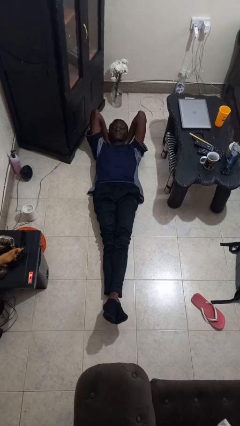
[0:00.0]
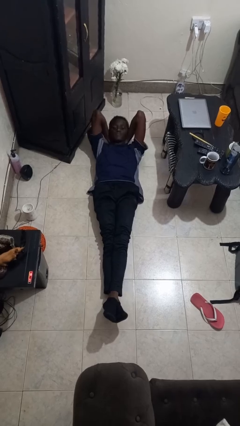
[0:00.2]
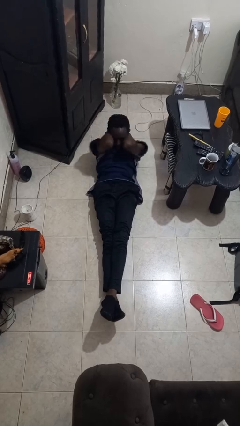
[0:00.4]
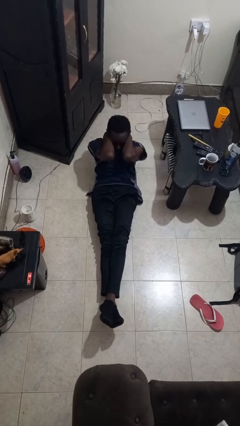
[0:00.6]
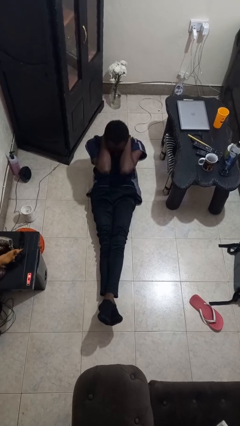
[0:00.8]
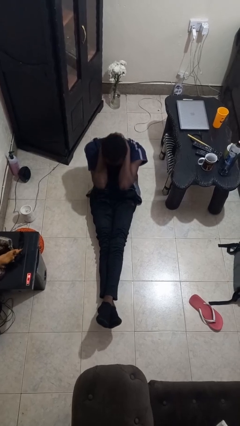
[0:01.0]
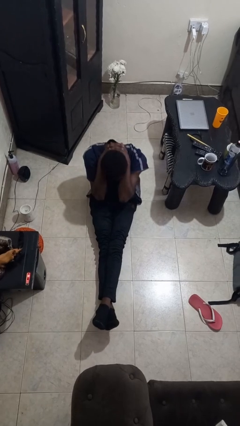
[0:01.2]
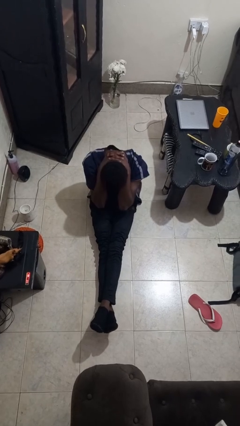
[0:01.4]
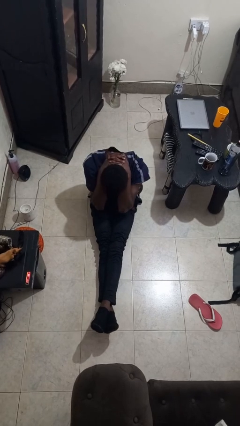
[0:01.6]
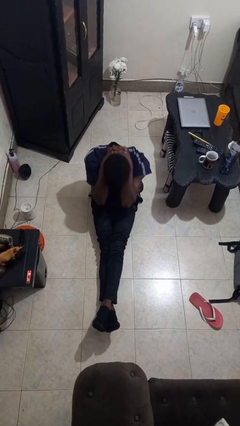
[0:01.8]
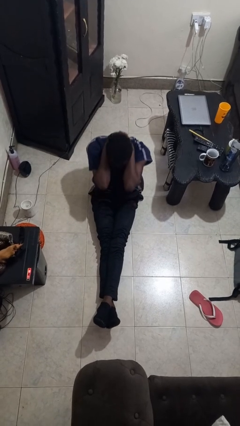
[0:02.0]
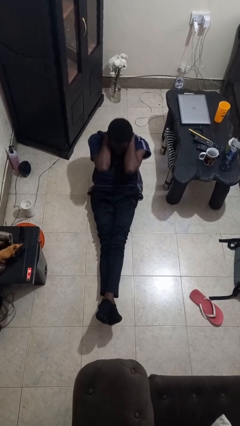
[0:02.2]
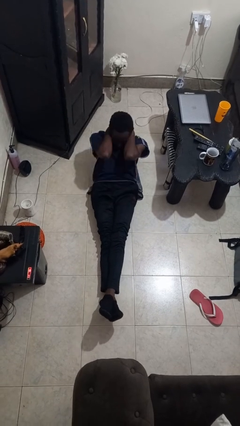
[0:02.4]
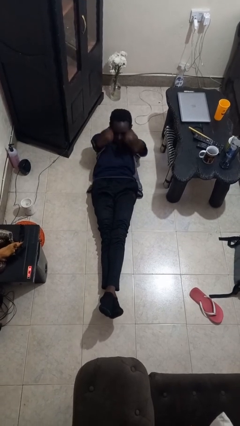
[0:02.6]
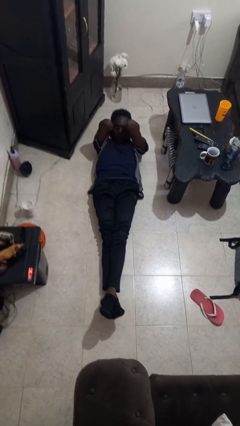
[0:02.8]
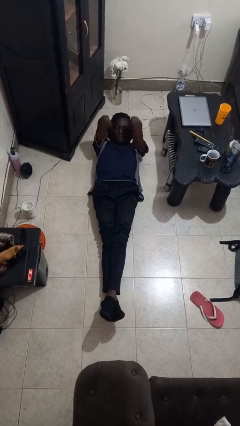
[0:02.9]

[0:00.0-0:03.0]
person exercises with situp

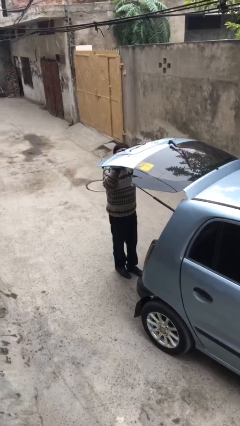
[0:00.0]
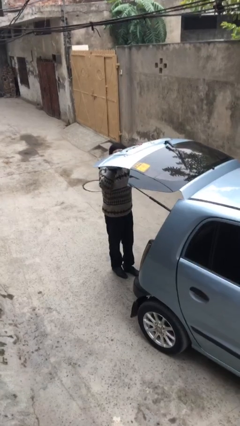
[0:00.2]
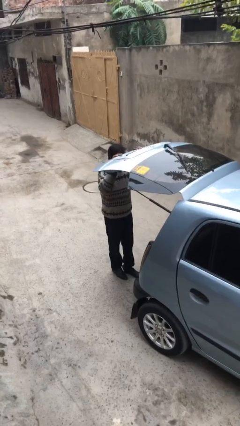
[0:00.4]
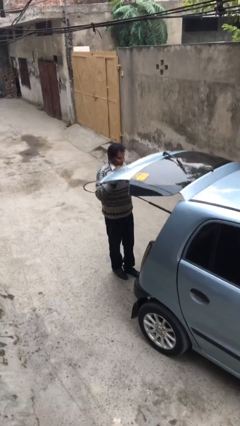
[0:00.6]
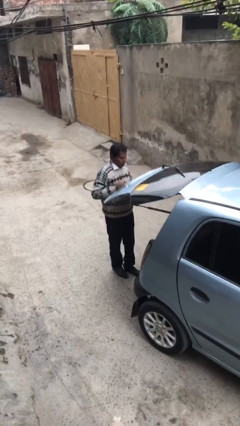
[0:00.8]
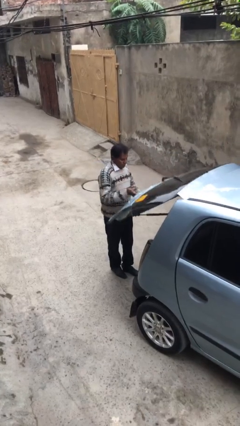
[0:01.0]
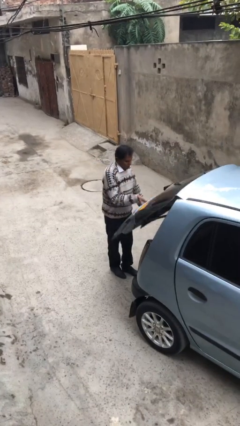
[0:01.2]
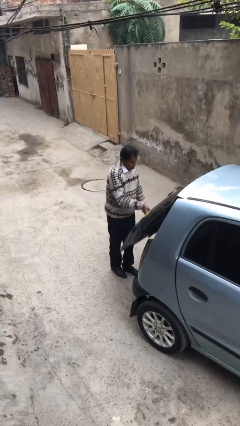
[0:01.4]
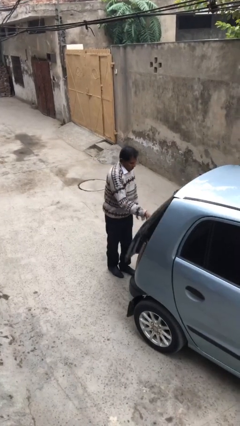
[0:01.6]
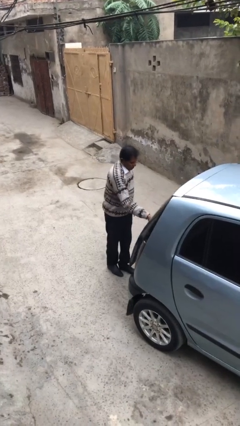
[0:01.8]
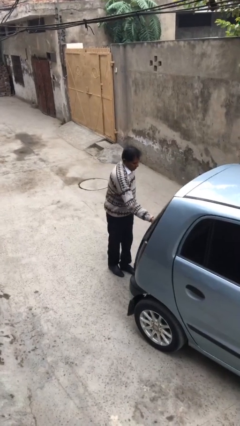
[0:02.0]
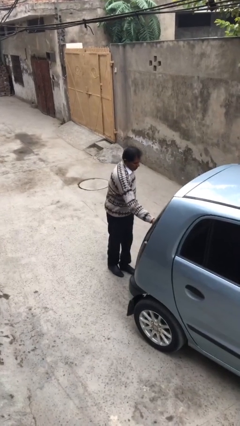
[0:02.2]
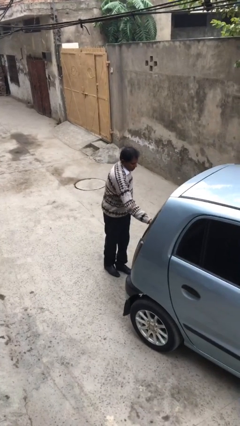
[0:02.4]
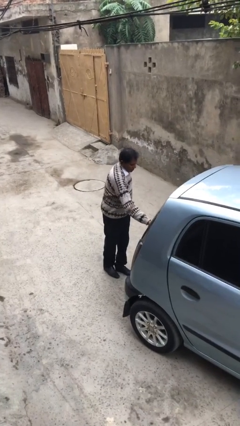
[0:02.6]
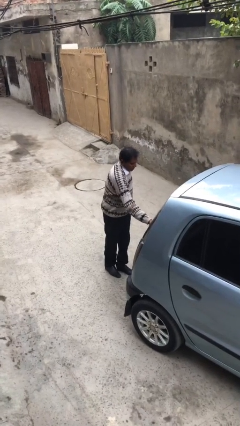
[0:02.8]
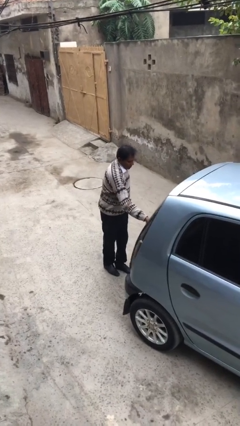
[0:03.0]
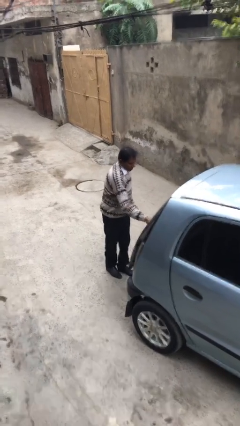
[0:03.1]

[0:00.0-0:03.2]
person closes car trunk

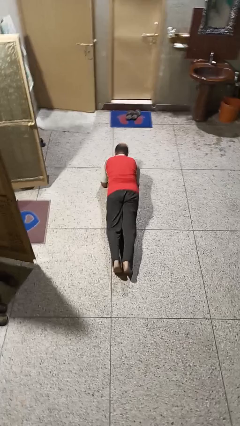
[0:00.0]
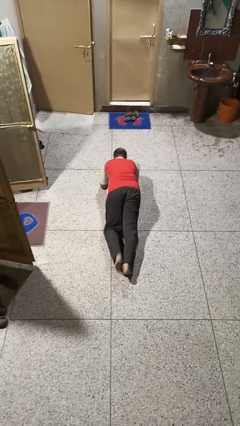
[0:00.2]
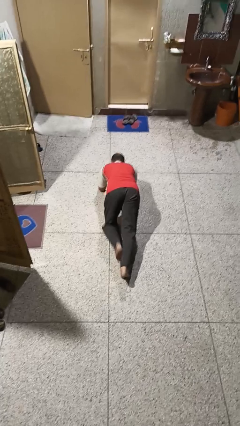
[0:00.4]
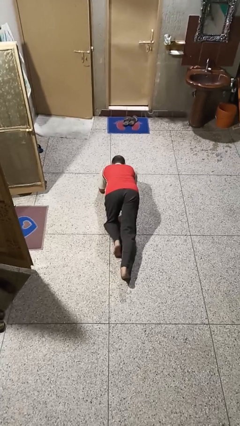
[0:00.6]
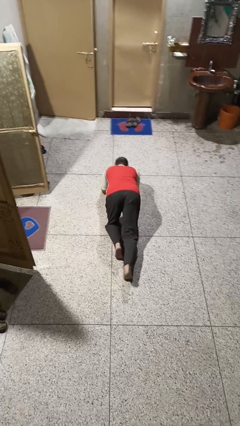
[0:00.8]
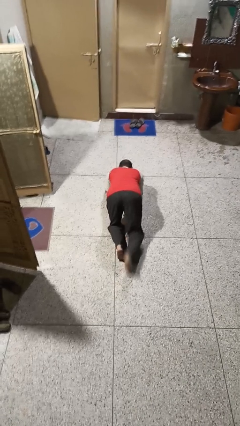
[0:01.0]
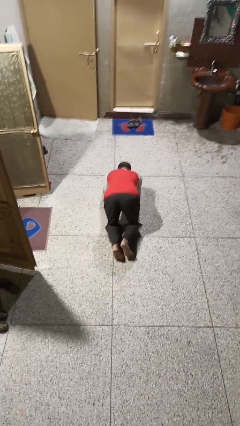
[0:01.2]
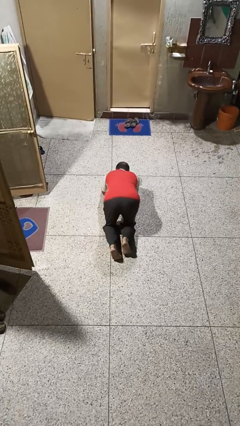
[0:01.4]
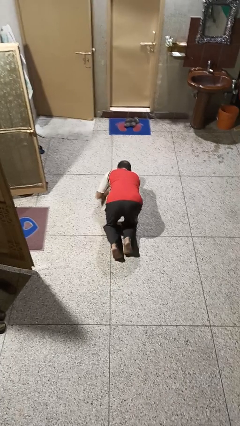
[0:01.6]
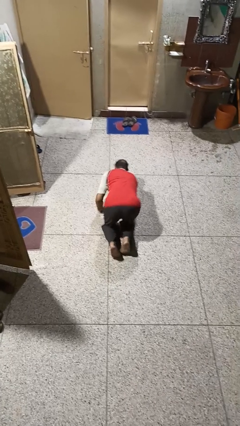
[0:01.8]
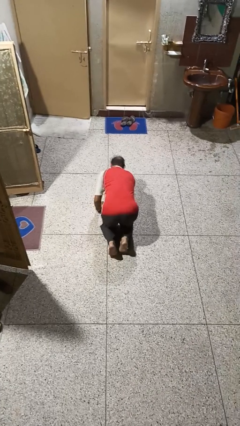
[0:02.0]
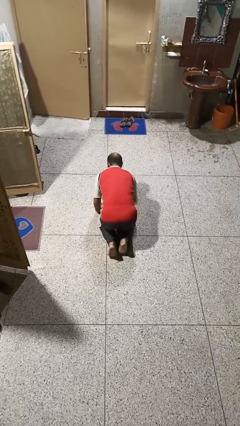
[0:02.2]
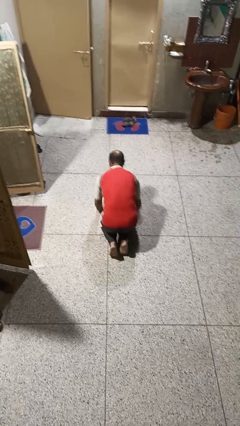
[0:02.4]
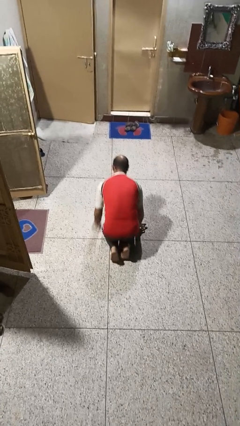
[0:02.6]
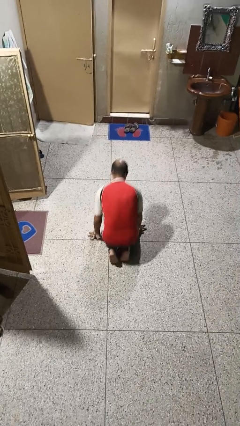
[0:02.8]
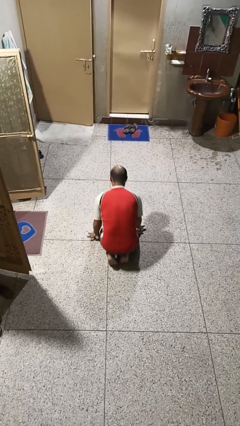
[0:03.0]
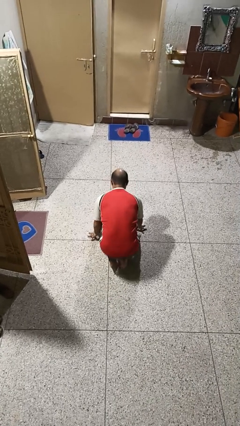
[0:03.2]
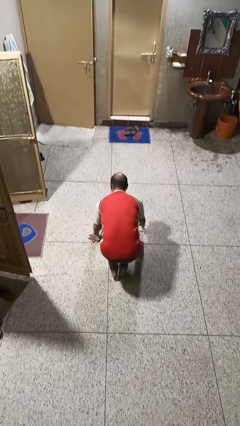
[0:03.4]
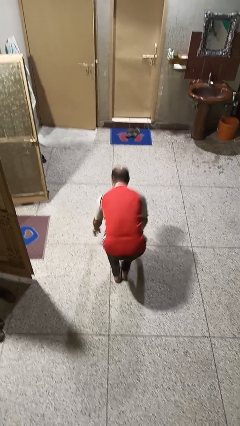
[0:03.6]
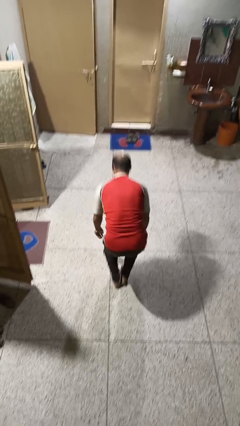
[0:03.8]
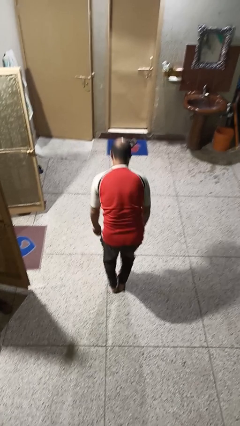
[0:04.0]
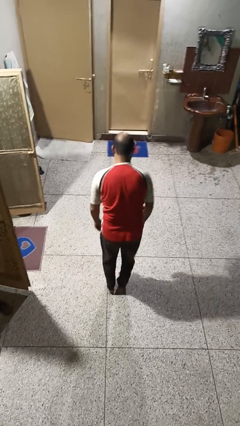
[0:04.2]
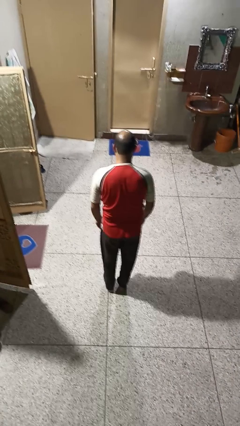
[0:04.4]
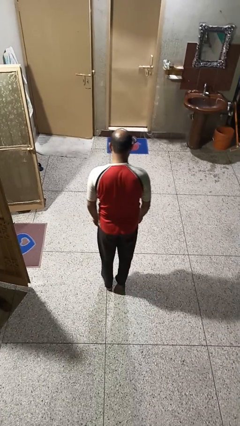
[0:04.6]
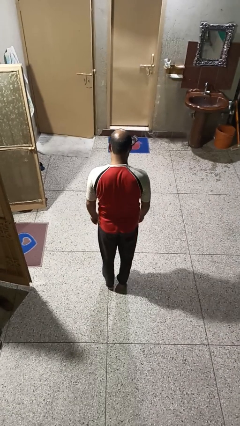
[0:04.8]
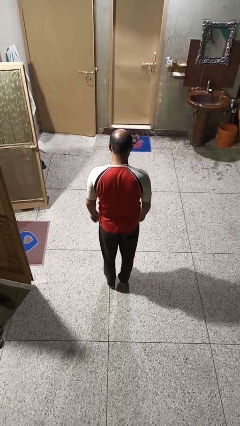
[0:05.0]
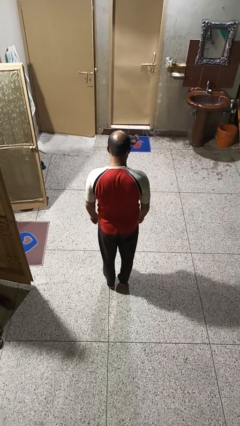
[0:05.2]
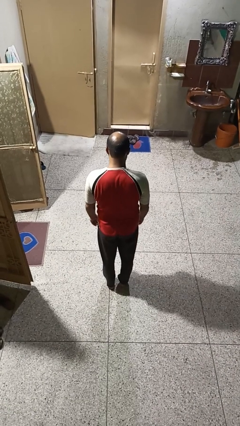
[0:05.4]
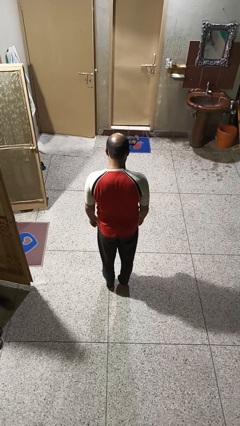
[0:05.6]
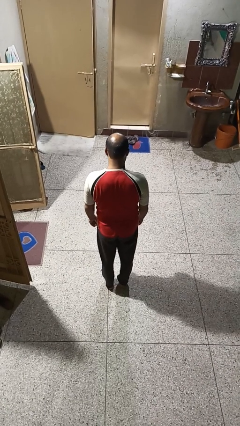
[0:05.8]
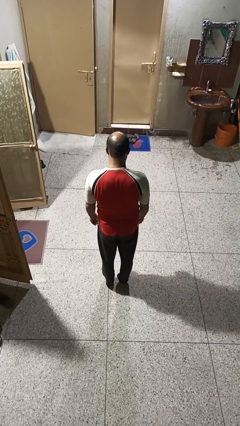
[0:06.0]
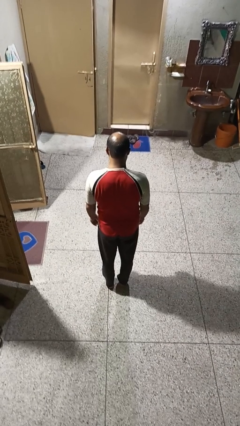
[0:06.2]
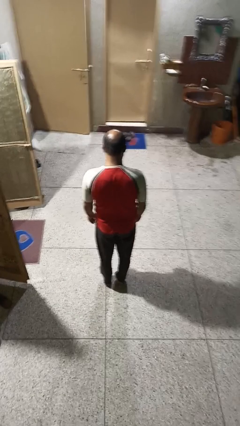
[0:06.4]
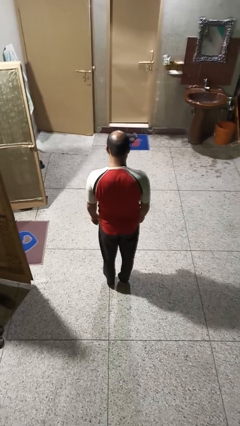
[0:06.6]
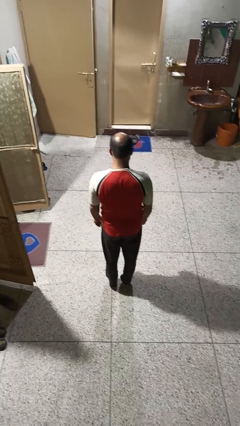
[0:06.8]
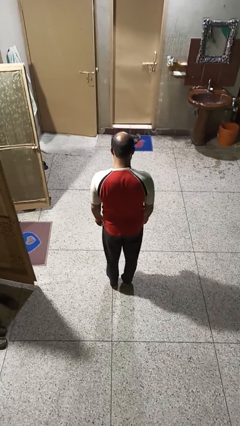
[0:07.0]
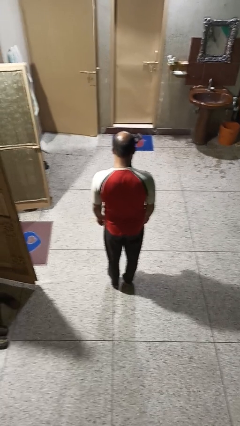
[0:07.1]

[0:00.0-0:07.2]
person stands up from floor

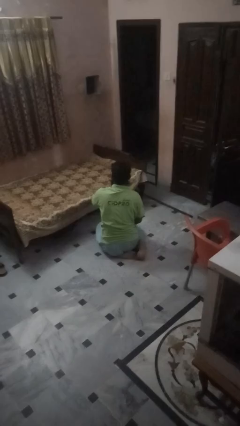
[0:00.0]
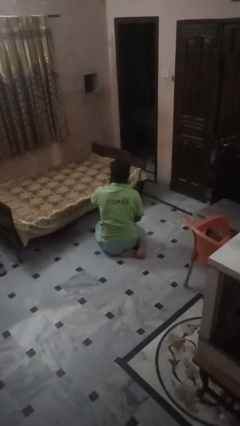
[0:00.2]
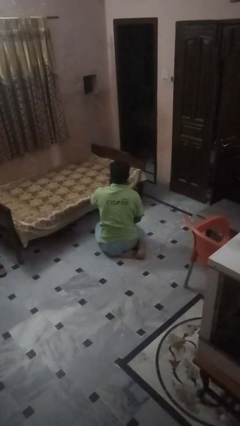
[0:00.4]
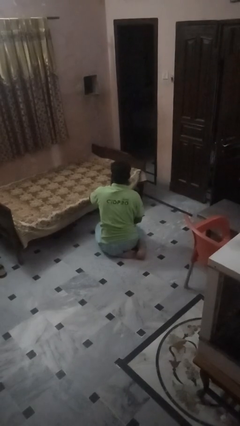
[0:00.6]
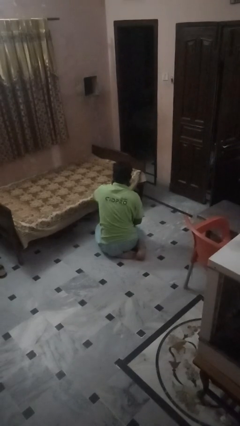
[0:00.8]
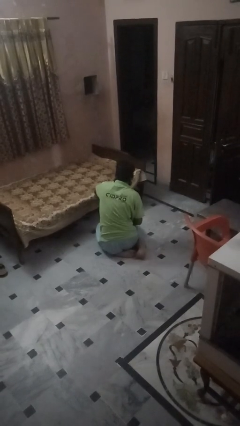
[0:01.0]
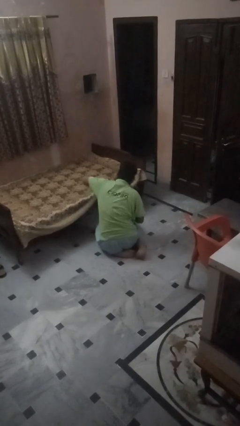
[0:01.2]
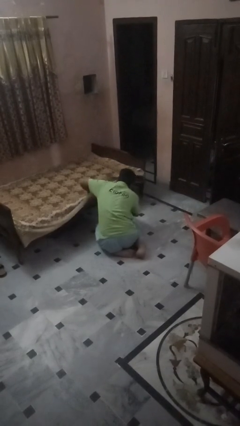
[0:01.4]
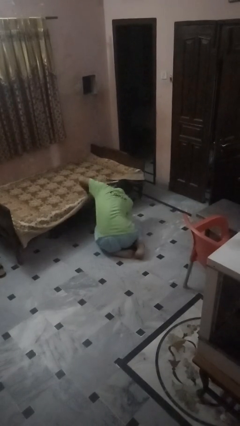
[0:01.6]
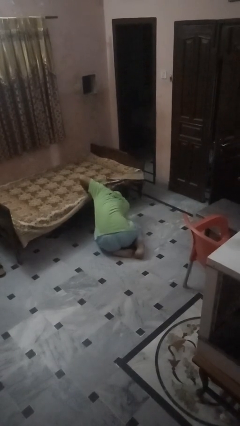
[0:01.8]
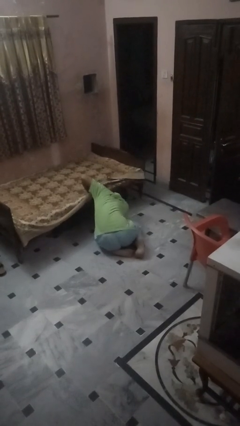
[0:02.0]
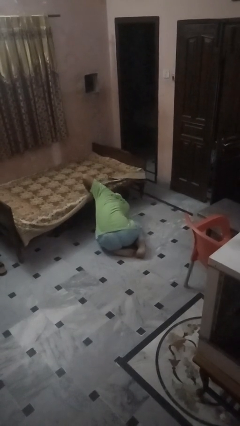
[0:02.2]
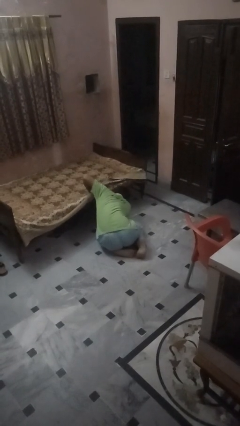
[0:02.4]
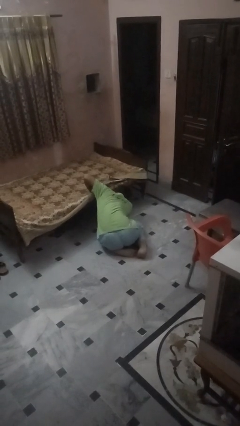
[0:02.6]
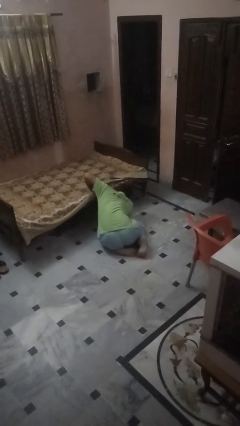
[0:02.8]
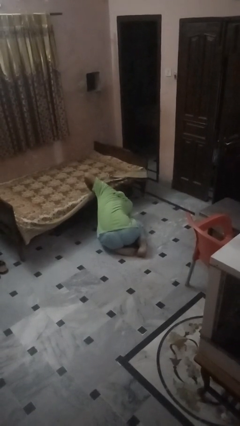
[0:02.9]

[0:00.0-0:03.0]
person searches under bed

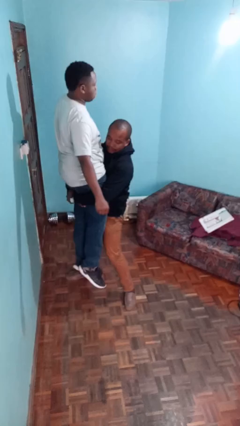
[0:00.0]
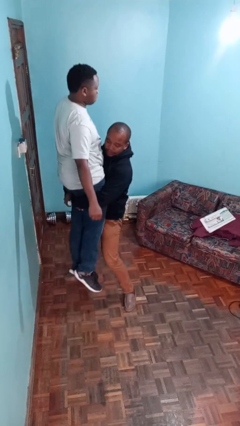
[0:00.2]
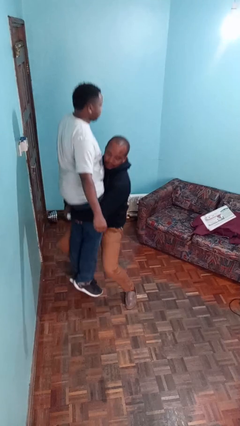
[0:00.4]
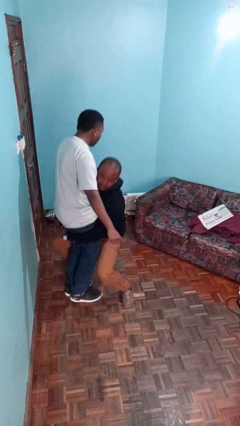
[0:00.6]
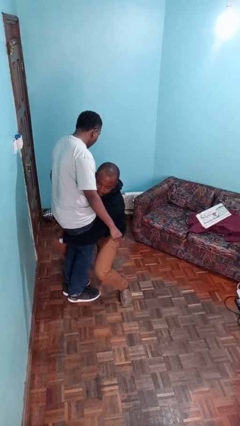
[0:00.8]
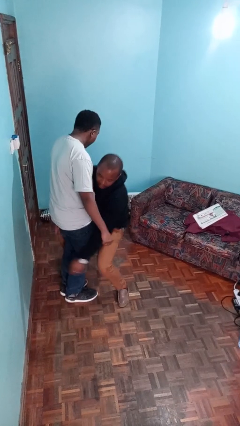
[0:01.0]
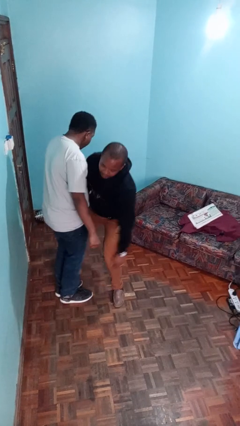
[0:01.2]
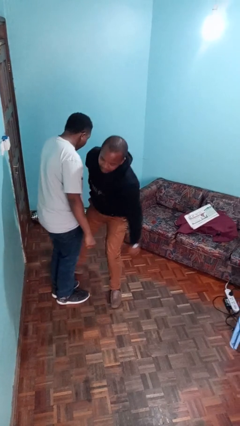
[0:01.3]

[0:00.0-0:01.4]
person puts down person
